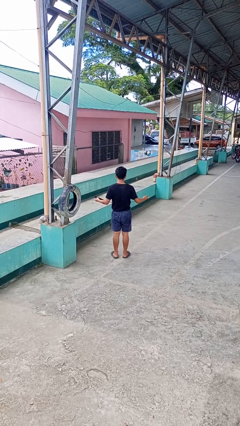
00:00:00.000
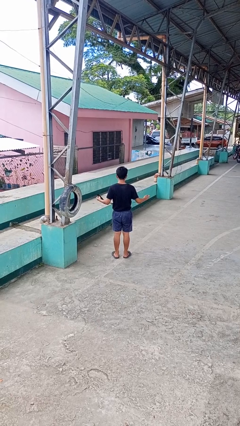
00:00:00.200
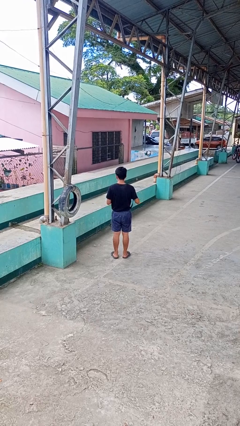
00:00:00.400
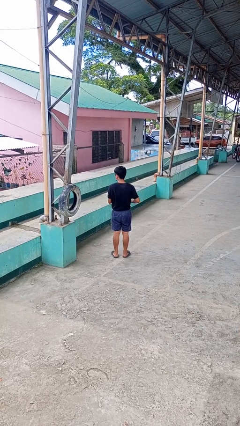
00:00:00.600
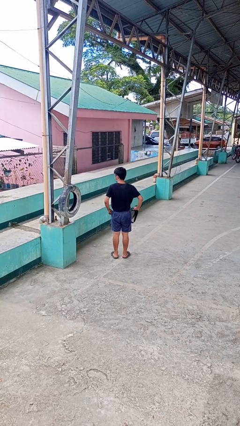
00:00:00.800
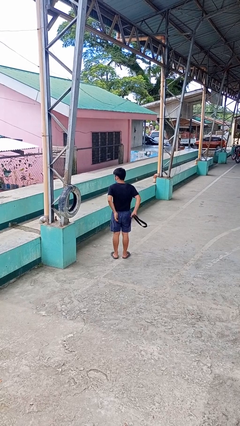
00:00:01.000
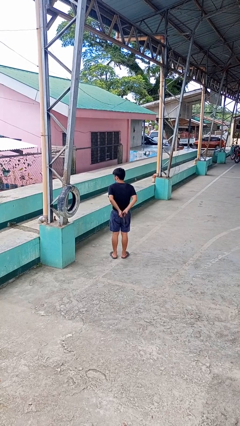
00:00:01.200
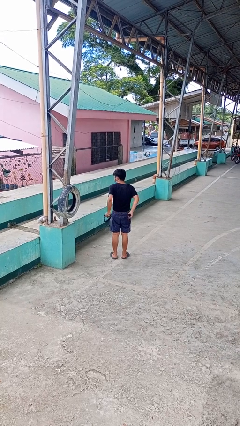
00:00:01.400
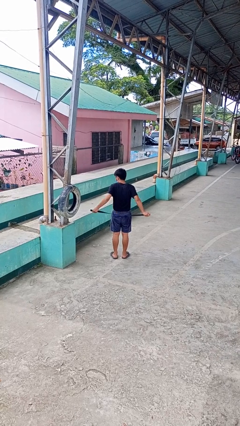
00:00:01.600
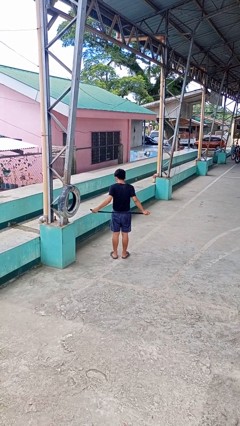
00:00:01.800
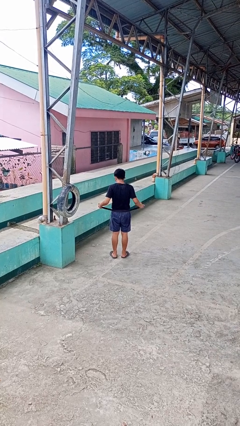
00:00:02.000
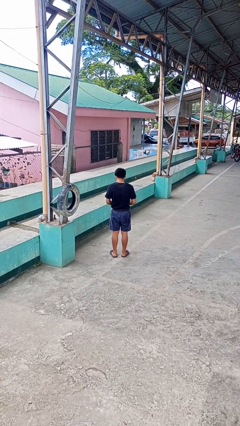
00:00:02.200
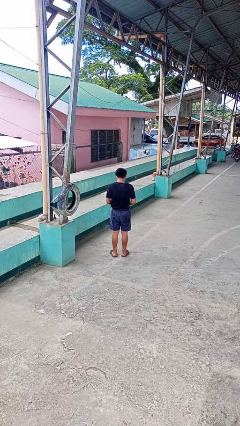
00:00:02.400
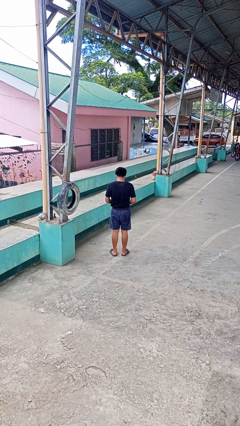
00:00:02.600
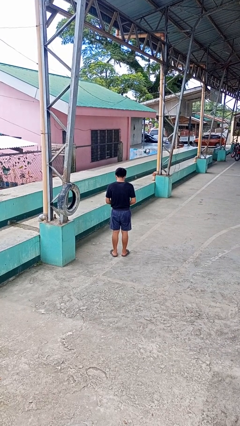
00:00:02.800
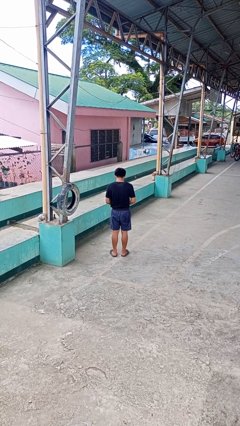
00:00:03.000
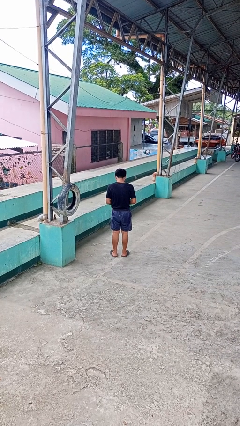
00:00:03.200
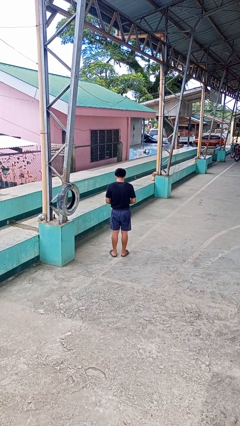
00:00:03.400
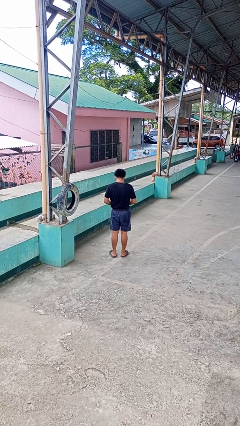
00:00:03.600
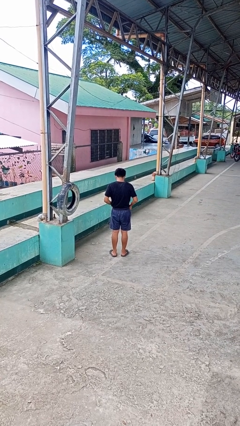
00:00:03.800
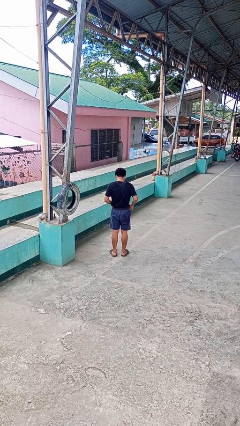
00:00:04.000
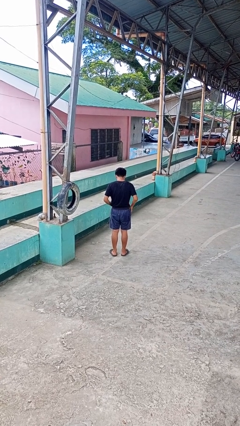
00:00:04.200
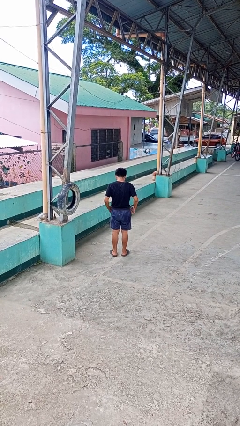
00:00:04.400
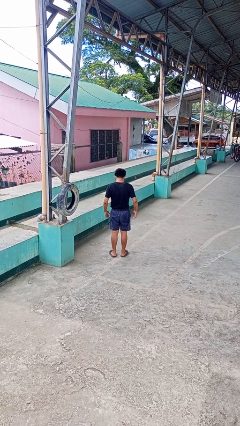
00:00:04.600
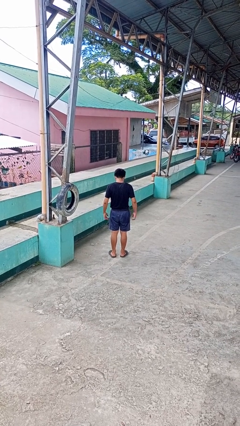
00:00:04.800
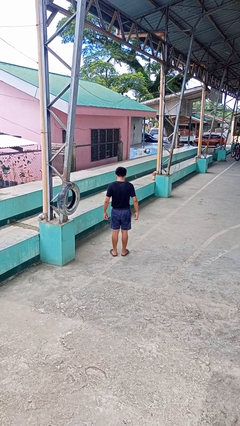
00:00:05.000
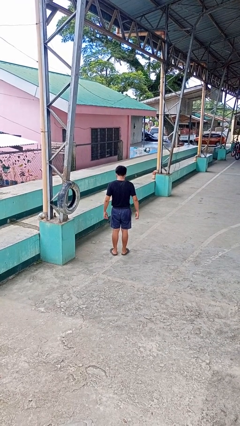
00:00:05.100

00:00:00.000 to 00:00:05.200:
person puts on belt

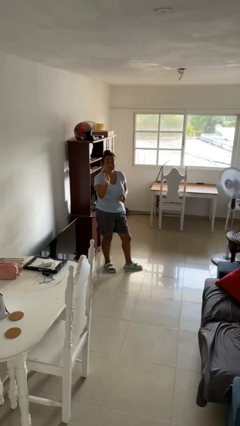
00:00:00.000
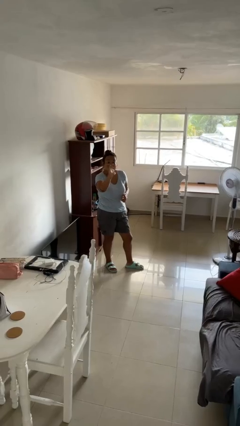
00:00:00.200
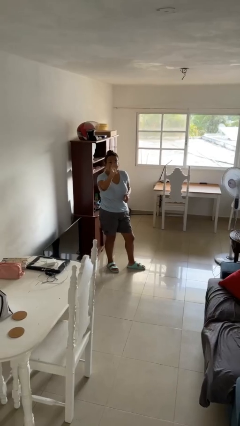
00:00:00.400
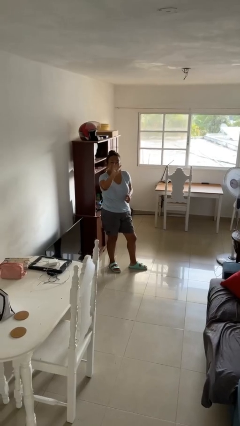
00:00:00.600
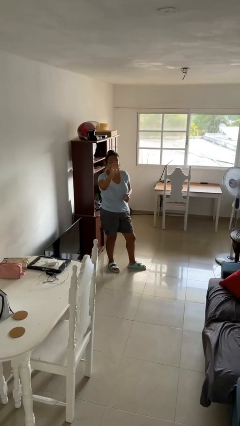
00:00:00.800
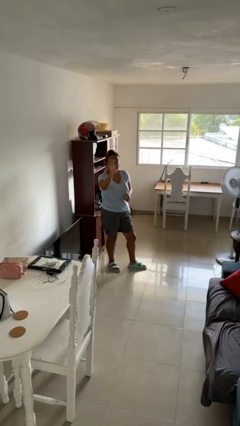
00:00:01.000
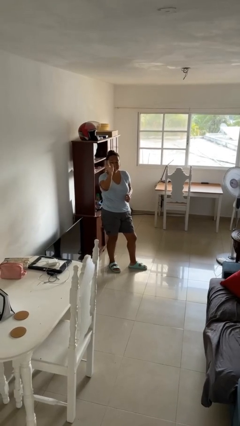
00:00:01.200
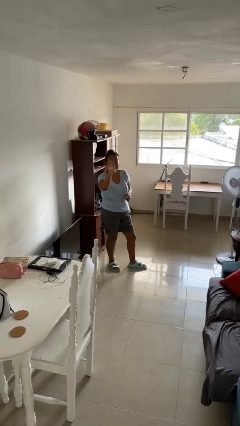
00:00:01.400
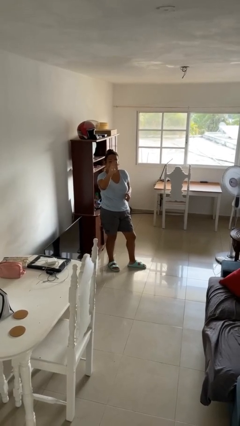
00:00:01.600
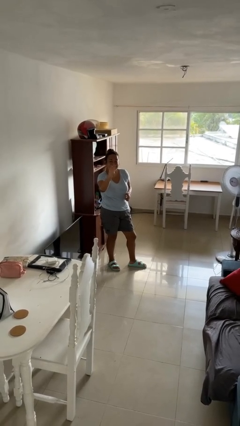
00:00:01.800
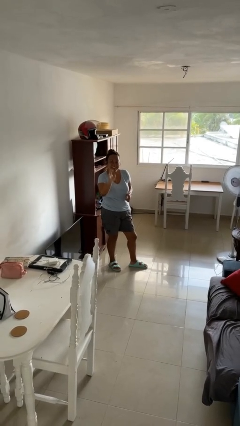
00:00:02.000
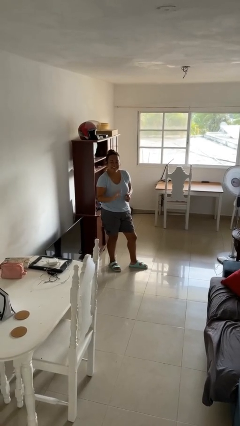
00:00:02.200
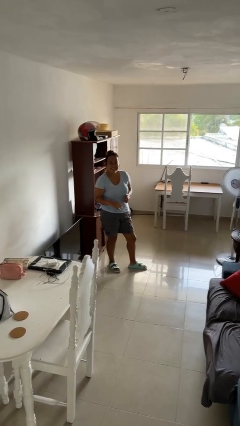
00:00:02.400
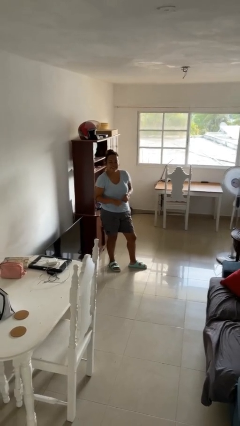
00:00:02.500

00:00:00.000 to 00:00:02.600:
person waves at person

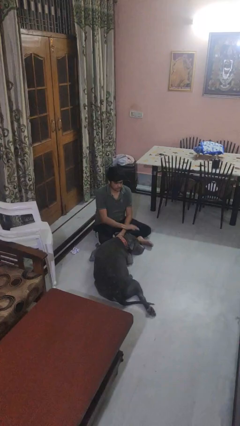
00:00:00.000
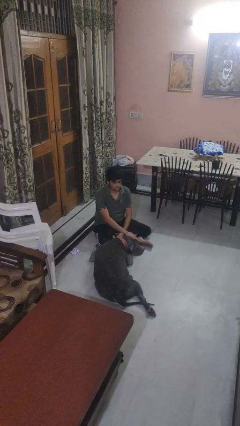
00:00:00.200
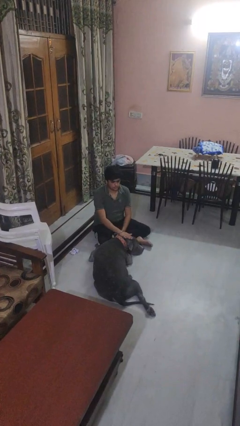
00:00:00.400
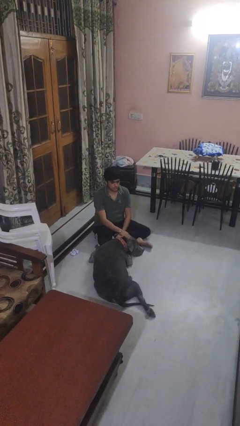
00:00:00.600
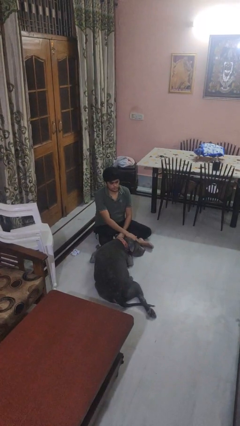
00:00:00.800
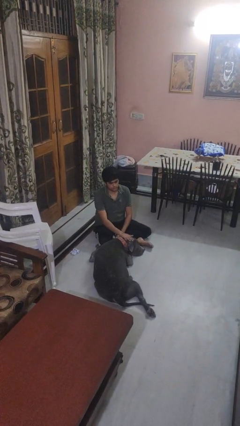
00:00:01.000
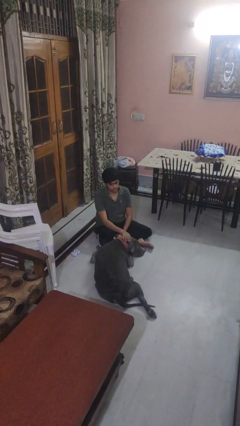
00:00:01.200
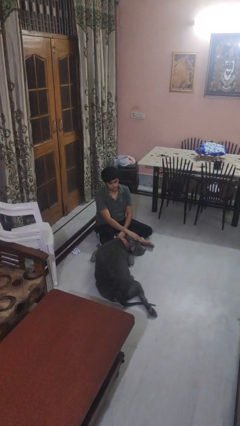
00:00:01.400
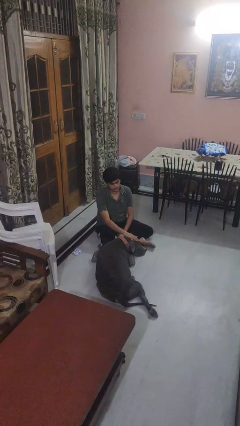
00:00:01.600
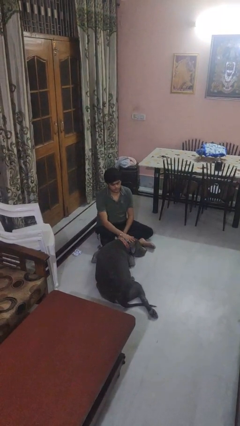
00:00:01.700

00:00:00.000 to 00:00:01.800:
person pets dog

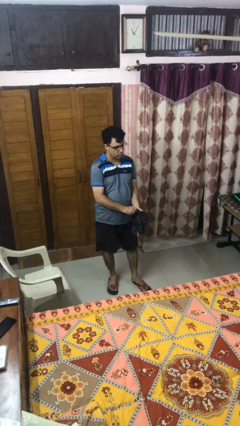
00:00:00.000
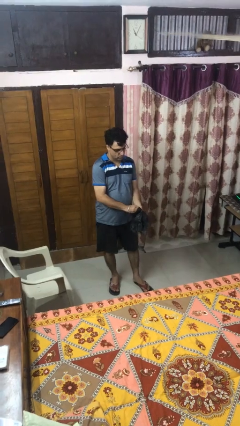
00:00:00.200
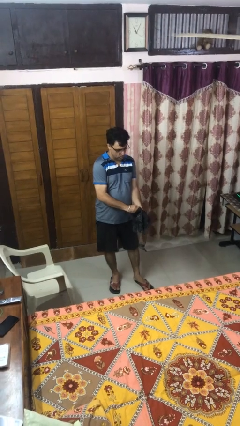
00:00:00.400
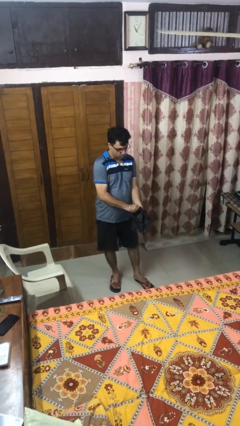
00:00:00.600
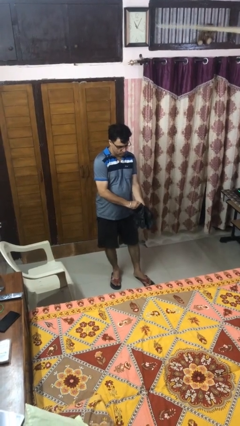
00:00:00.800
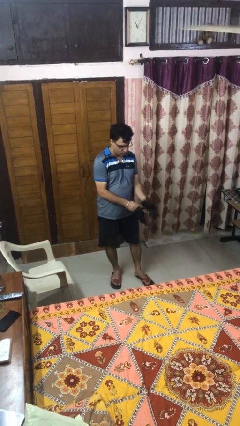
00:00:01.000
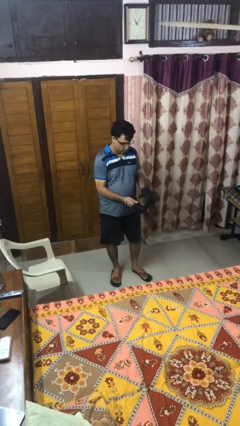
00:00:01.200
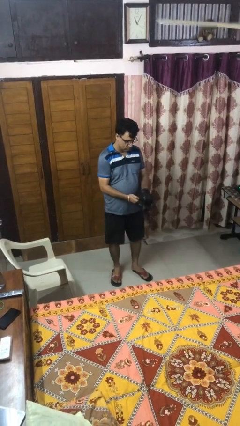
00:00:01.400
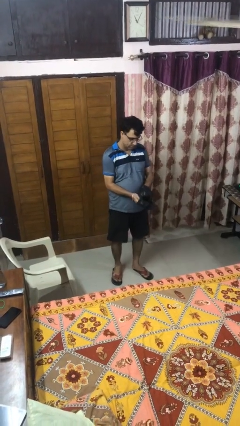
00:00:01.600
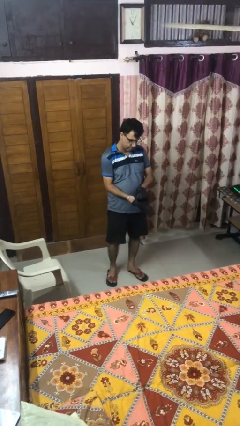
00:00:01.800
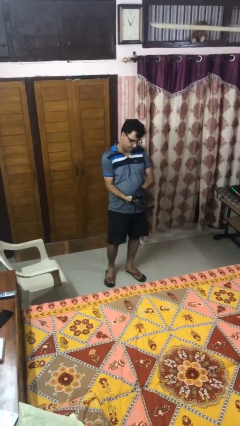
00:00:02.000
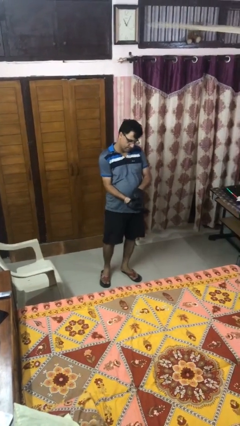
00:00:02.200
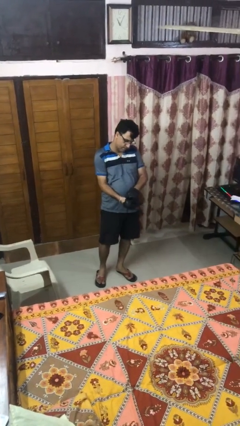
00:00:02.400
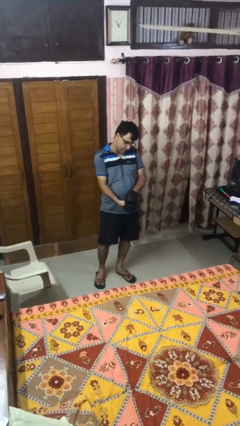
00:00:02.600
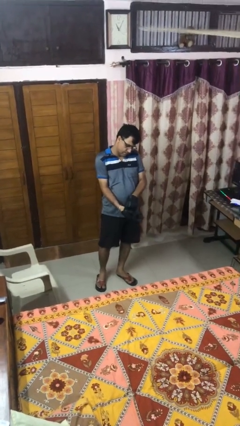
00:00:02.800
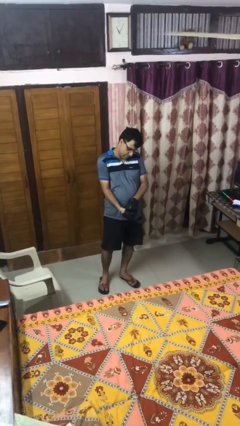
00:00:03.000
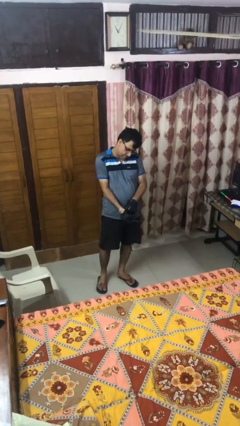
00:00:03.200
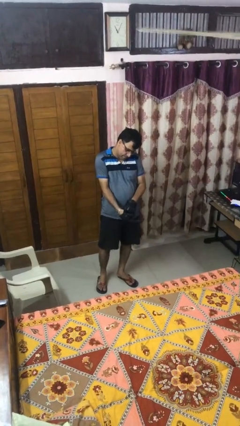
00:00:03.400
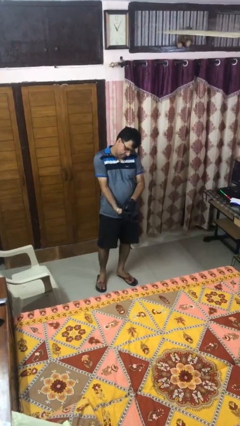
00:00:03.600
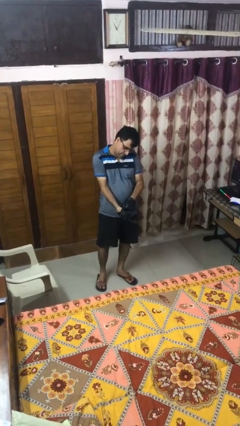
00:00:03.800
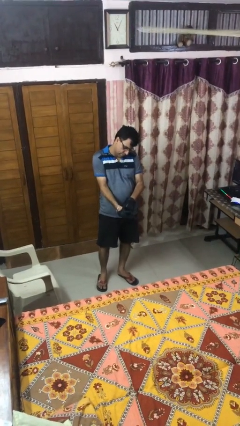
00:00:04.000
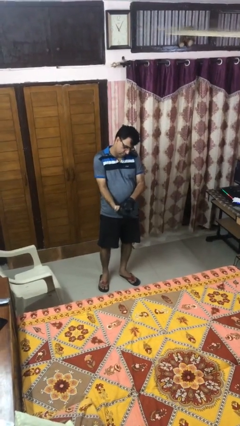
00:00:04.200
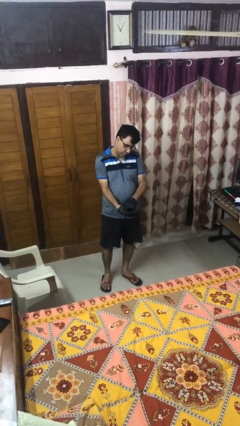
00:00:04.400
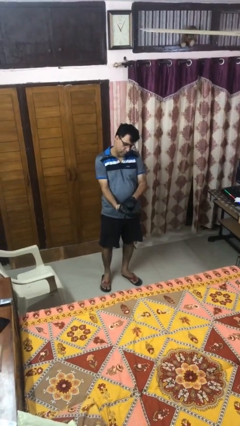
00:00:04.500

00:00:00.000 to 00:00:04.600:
person puts on gloves

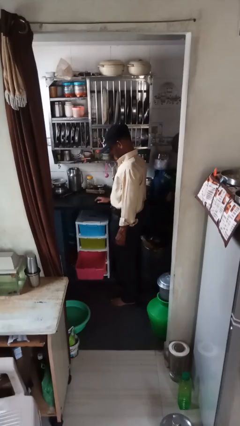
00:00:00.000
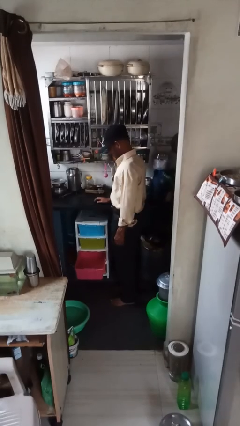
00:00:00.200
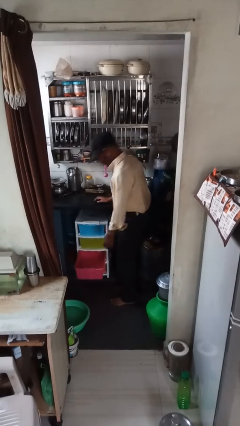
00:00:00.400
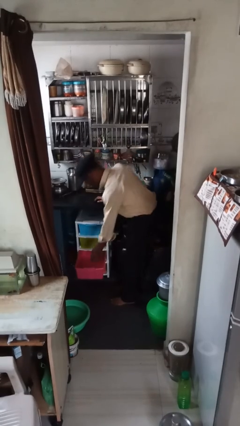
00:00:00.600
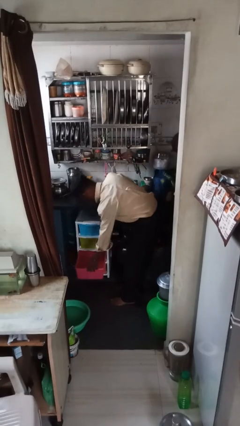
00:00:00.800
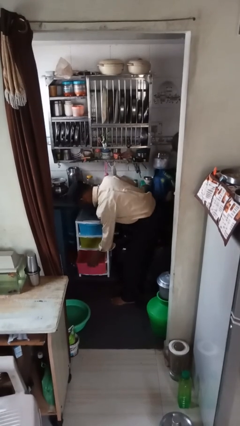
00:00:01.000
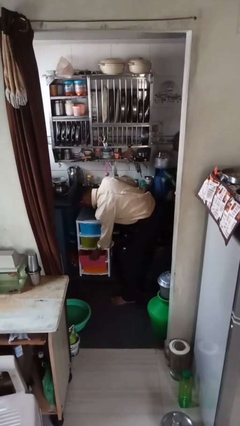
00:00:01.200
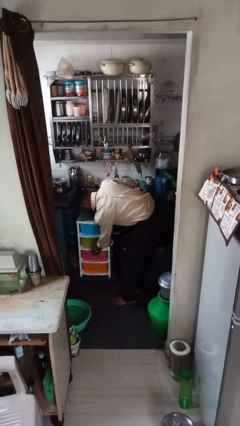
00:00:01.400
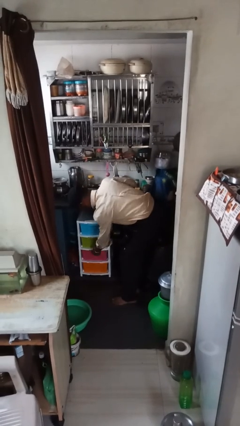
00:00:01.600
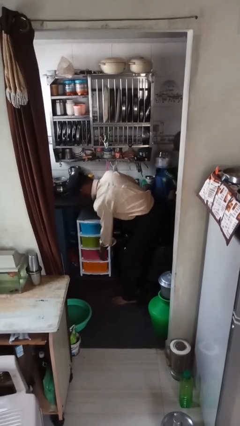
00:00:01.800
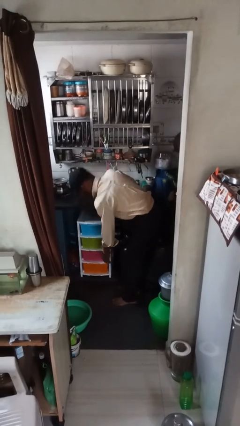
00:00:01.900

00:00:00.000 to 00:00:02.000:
person closes kitchen drawer

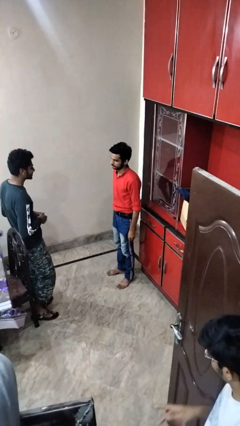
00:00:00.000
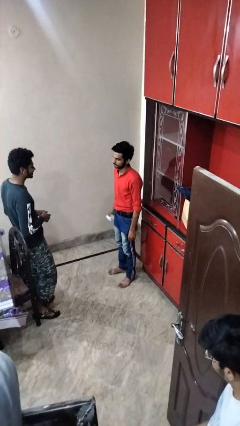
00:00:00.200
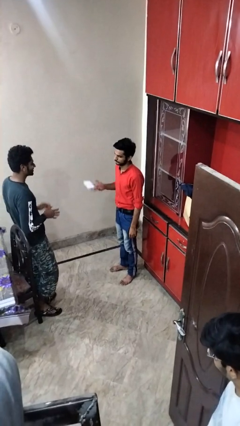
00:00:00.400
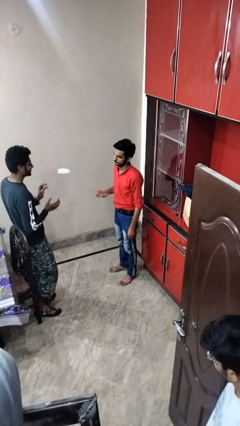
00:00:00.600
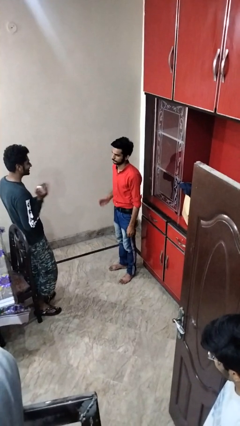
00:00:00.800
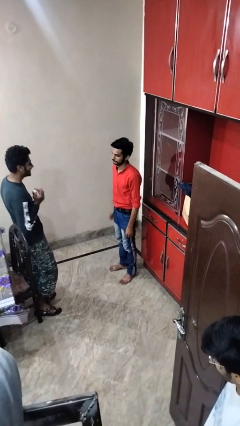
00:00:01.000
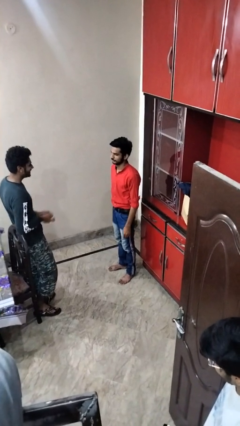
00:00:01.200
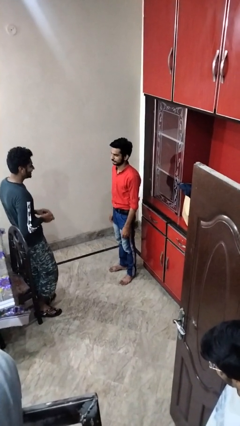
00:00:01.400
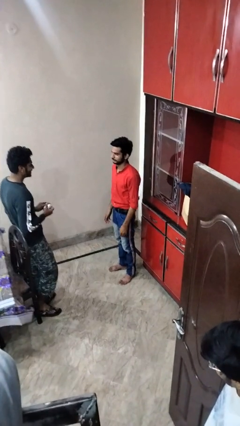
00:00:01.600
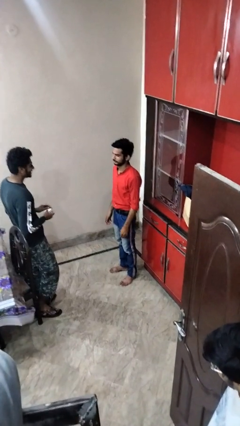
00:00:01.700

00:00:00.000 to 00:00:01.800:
person throws object to person
